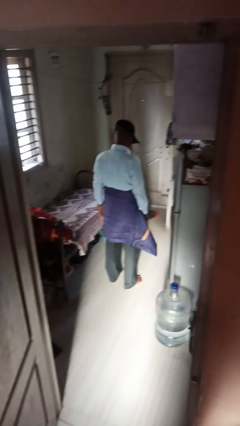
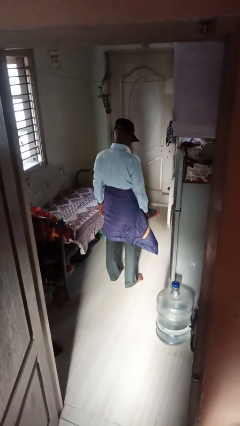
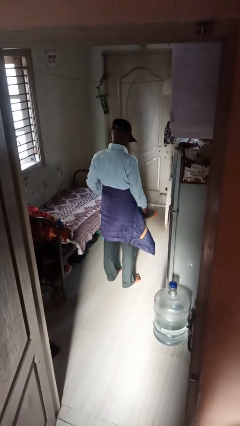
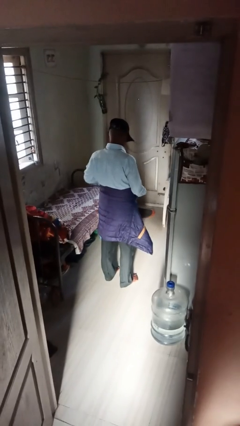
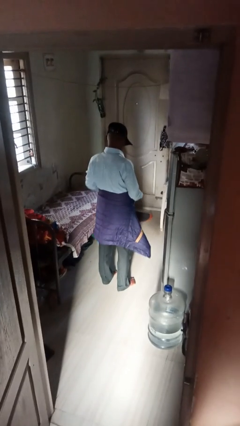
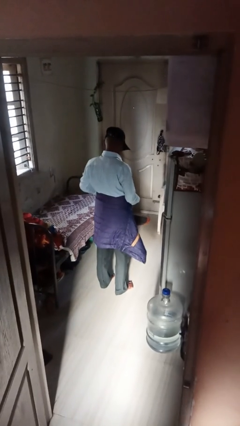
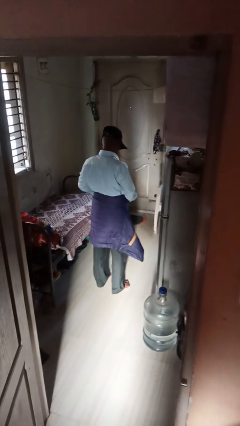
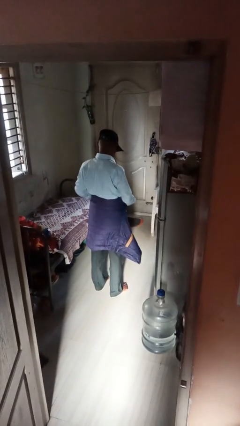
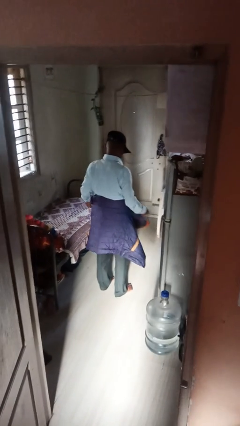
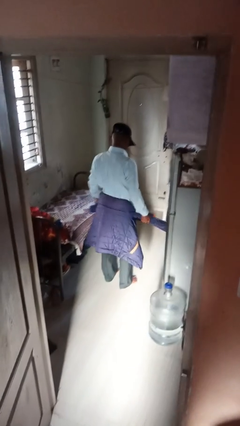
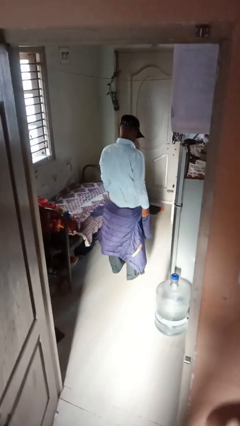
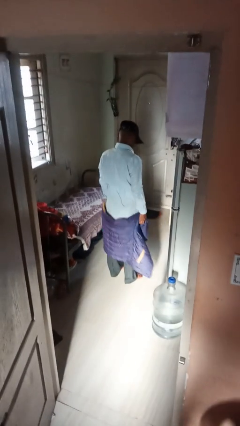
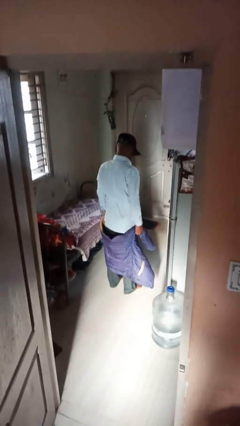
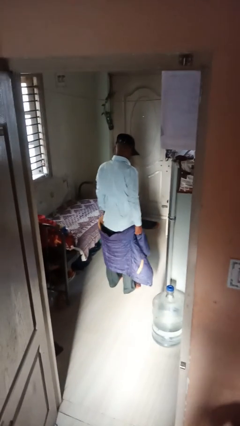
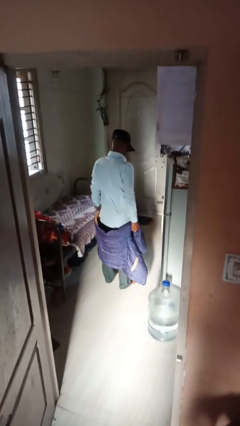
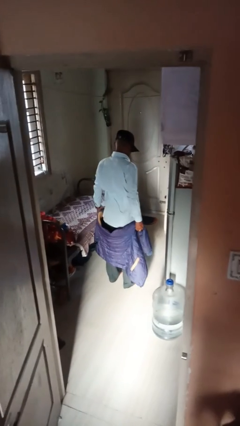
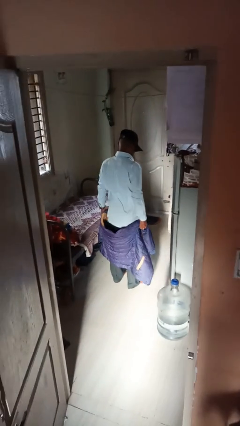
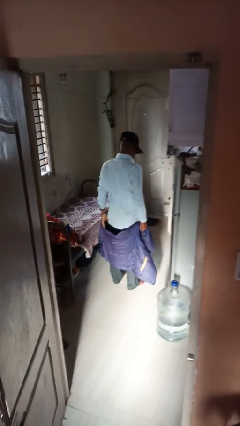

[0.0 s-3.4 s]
person unties jacket around waist

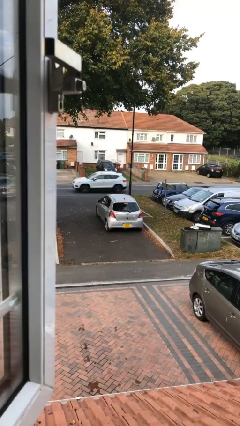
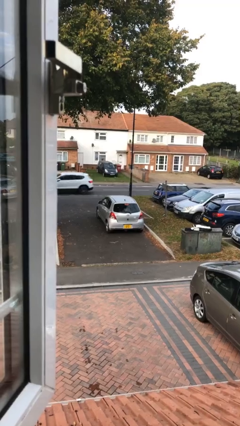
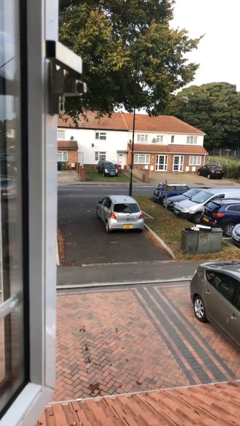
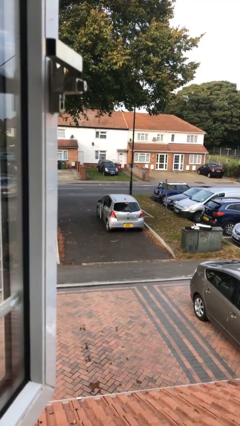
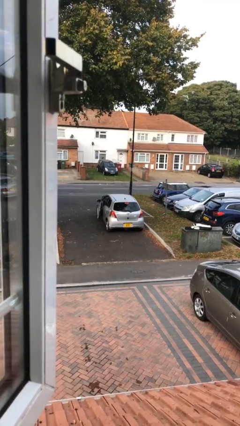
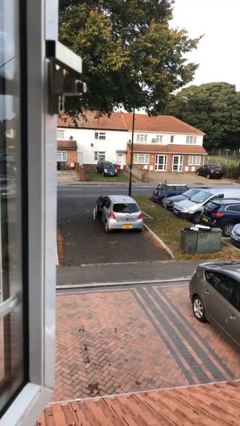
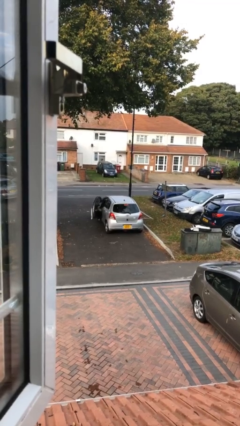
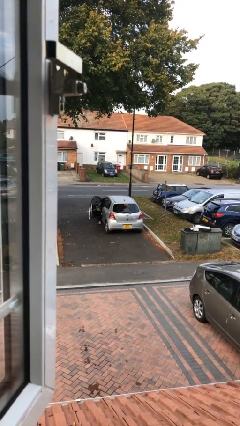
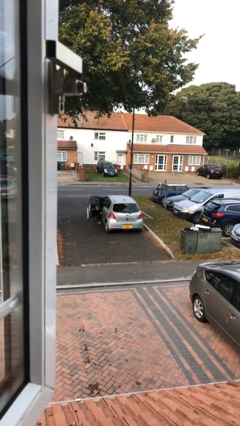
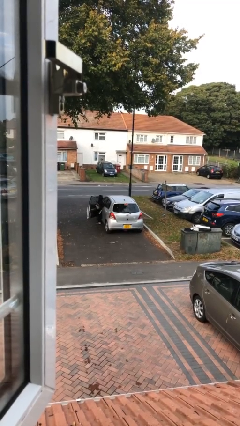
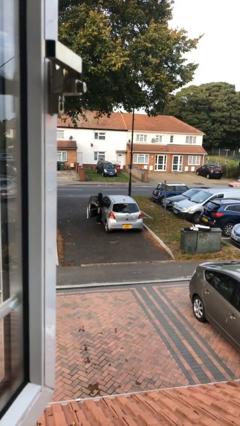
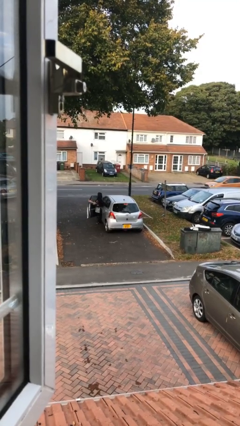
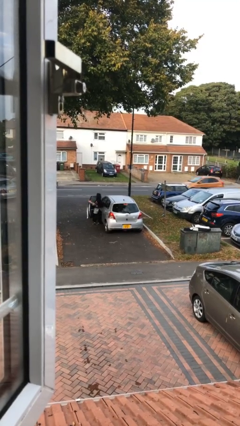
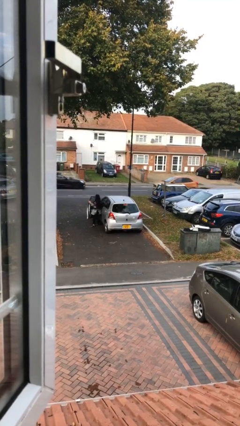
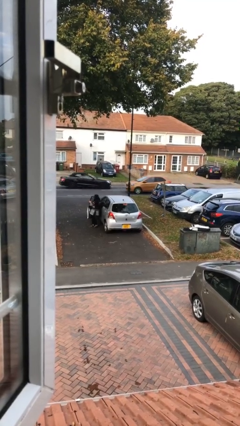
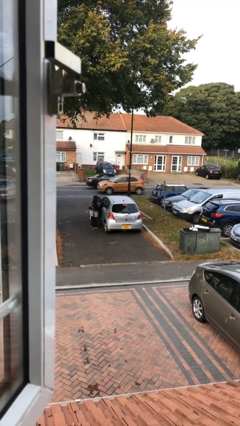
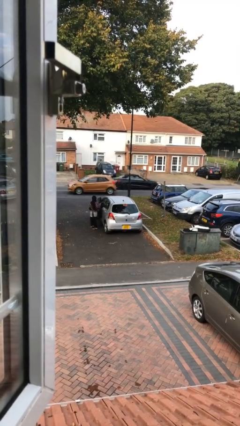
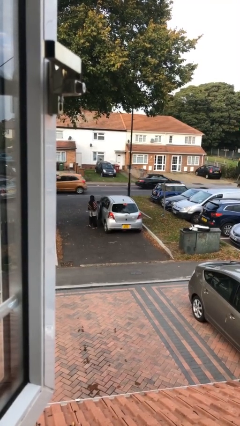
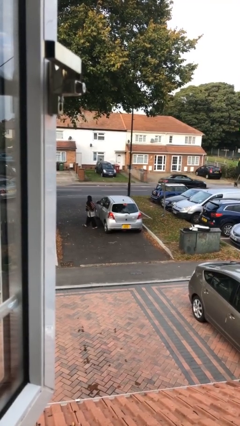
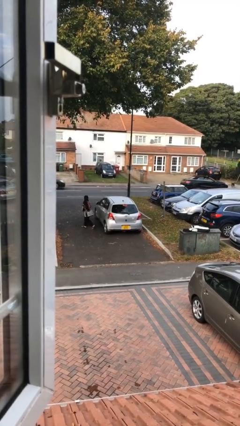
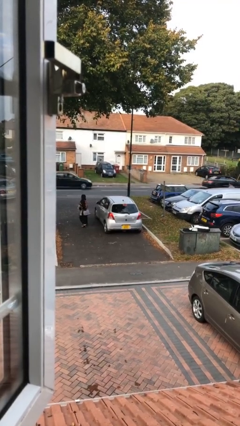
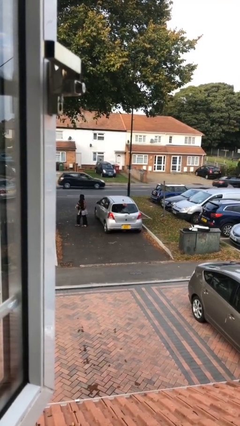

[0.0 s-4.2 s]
car drops off person

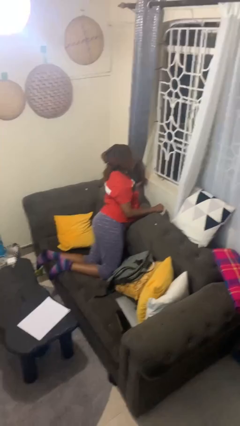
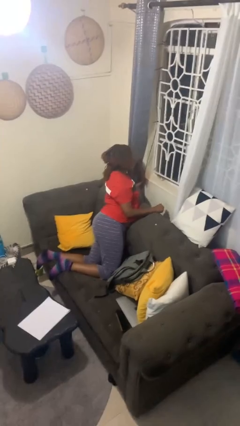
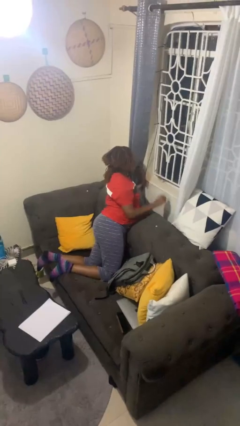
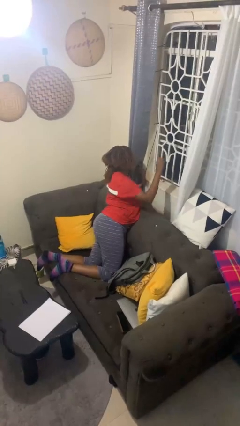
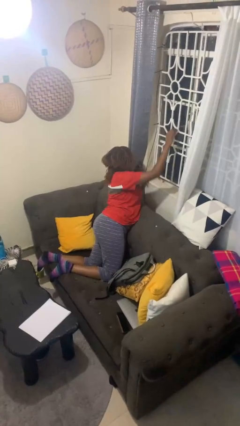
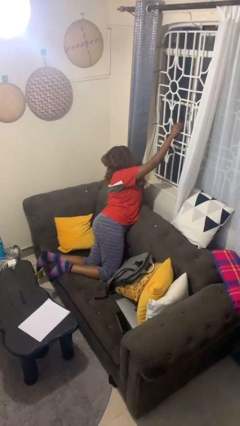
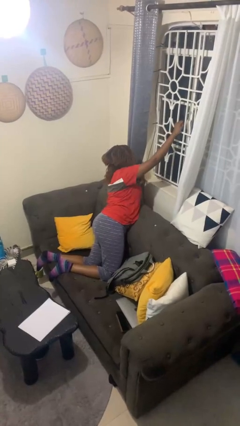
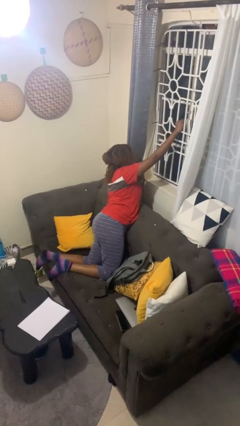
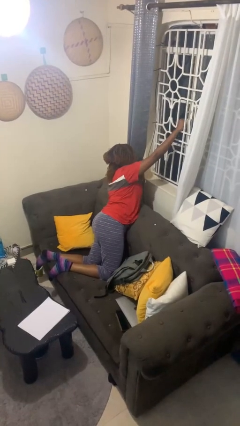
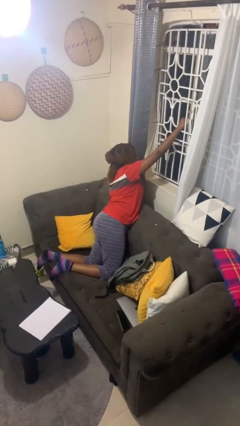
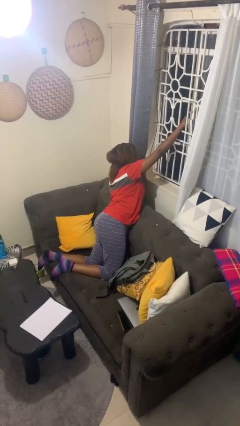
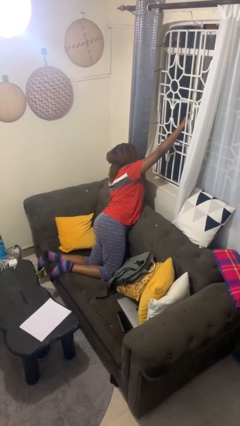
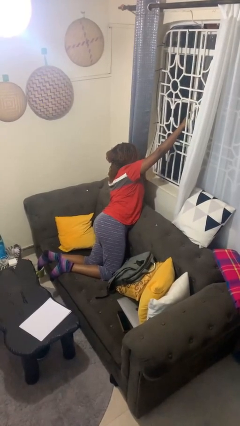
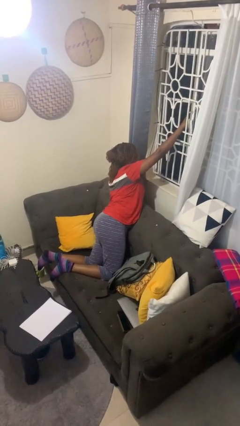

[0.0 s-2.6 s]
person opens home window

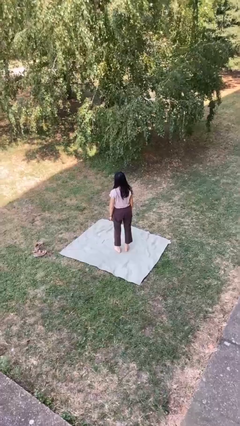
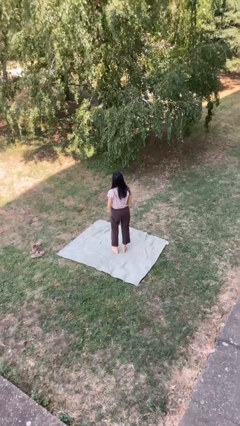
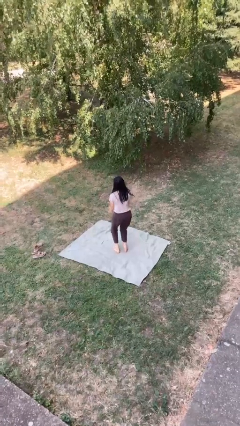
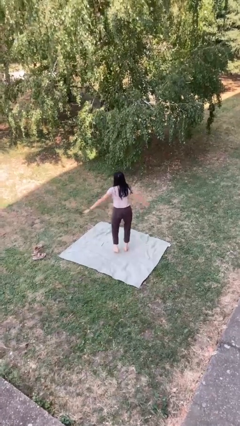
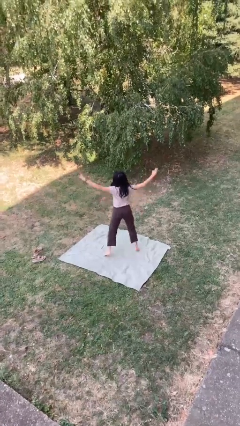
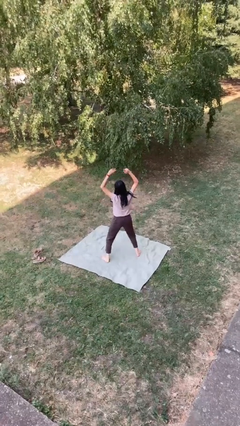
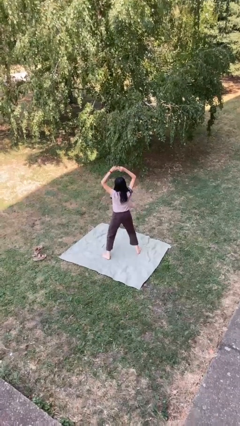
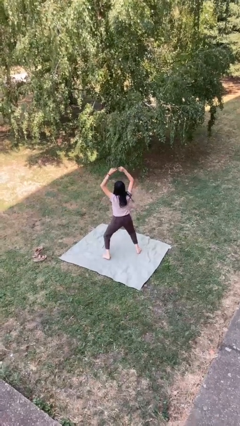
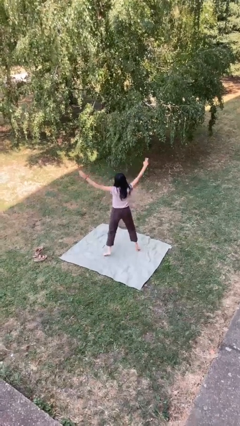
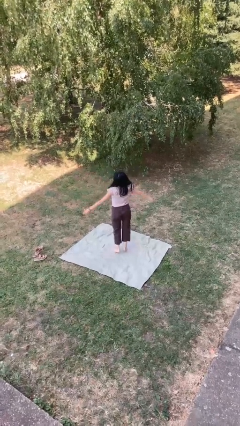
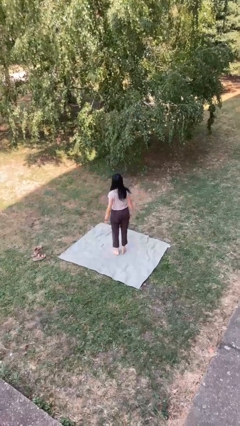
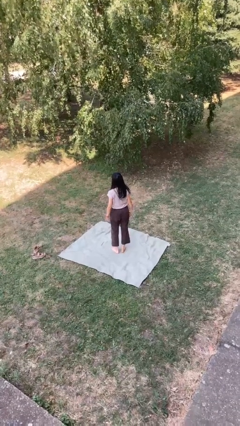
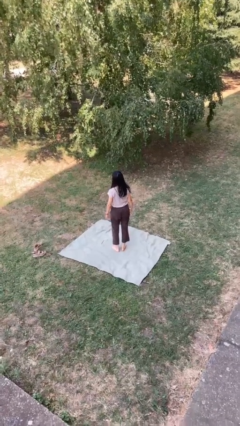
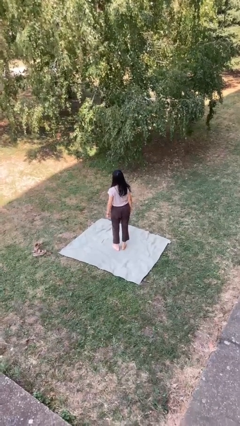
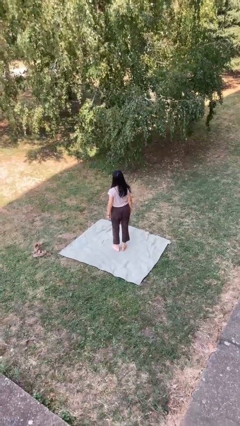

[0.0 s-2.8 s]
person exercises with jumping jacks

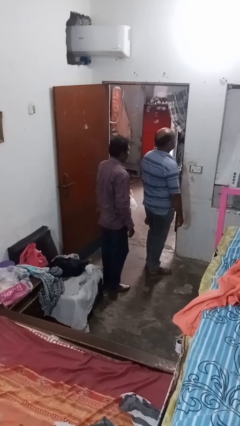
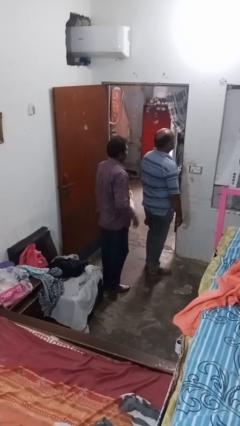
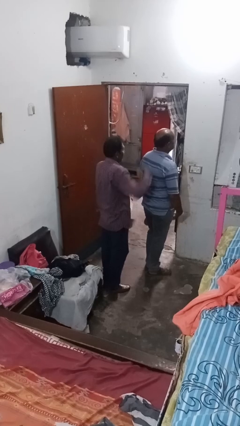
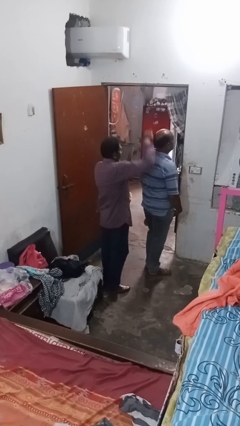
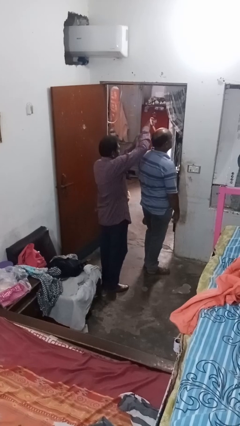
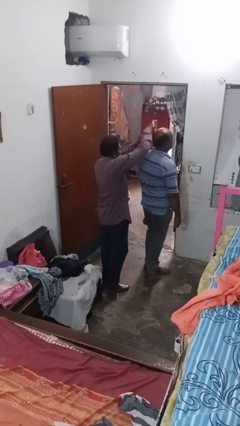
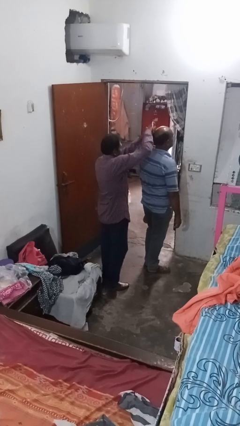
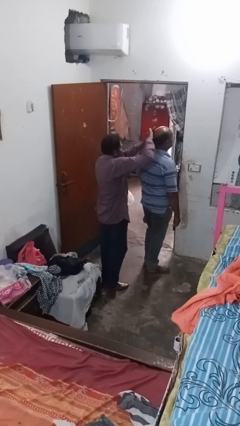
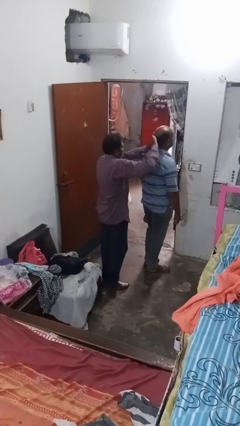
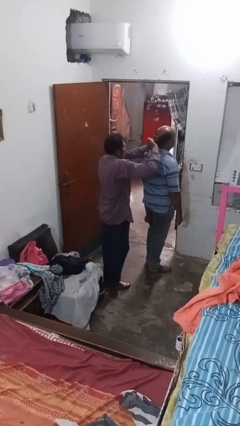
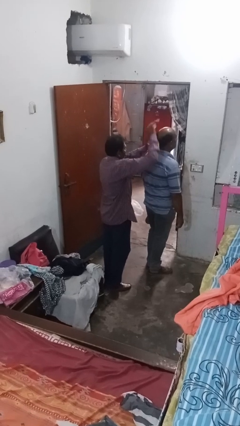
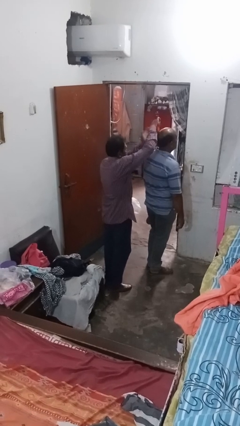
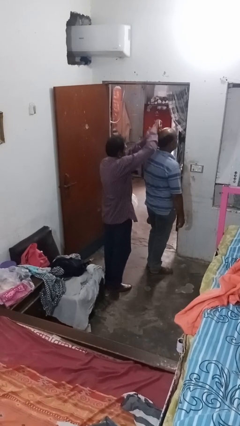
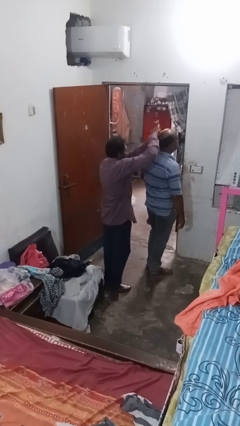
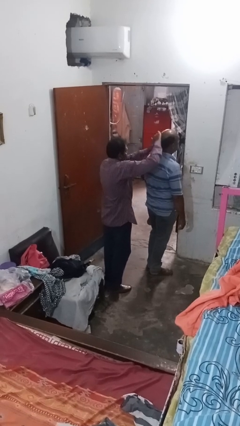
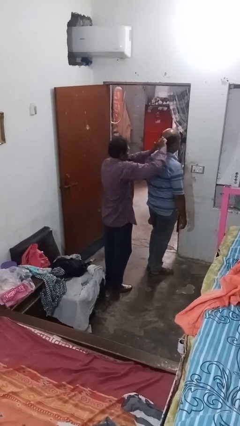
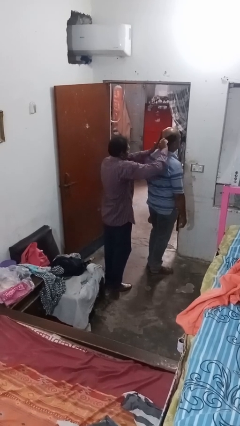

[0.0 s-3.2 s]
person brushes hair of person

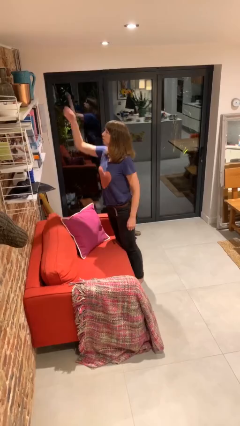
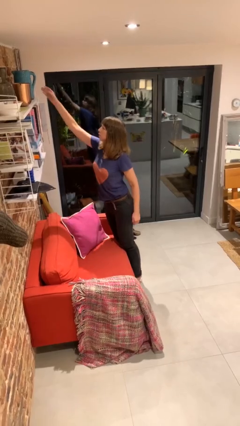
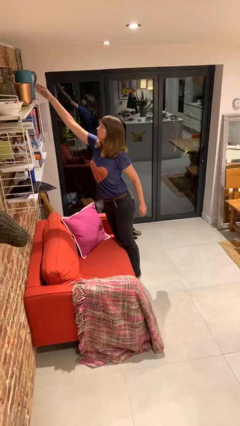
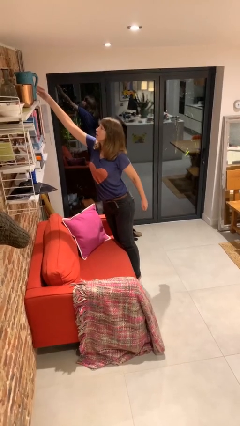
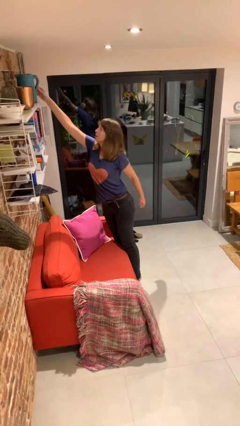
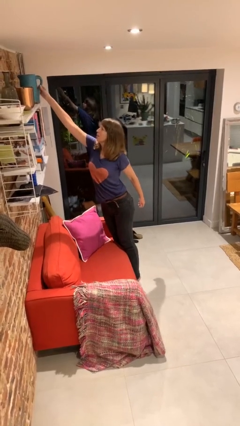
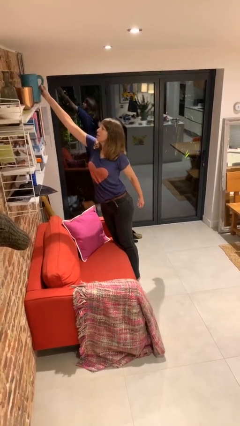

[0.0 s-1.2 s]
person picks up object from shelf
